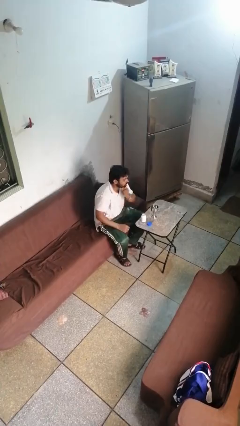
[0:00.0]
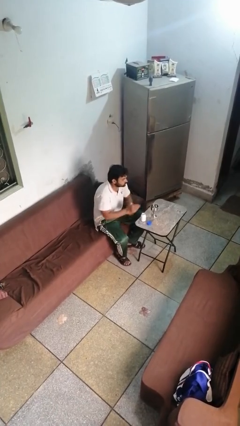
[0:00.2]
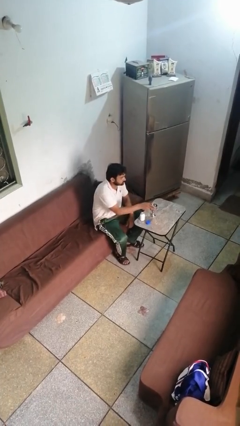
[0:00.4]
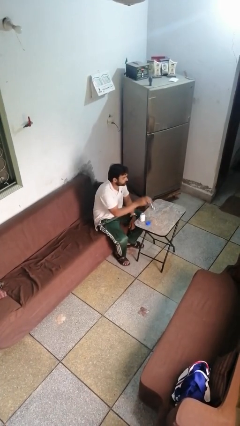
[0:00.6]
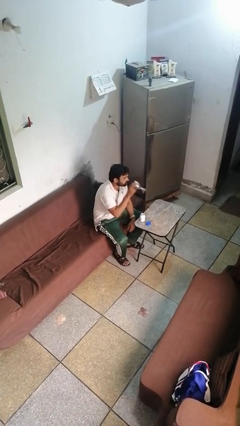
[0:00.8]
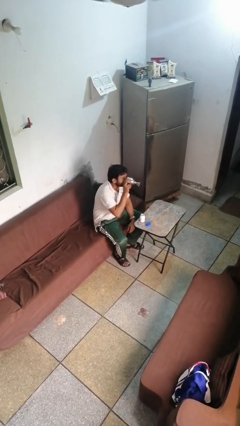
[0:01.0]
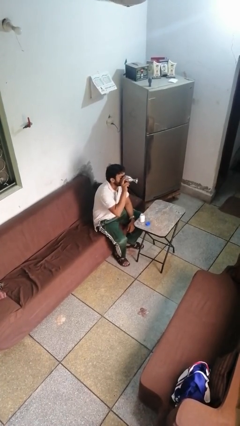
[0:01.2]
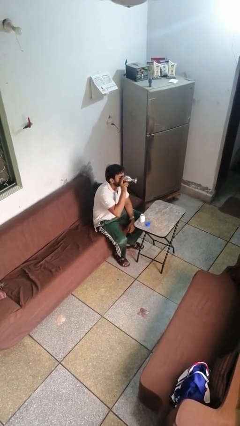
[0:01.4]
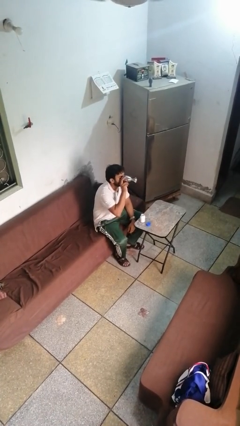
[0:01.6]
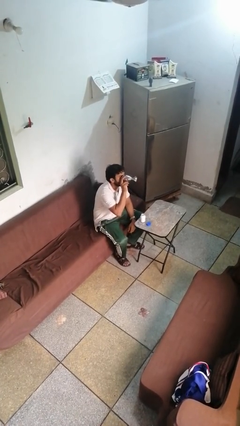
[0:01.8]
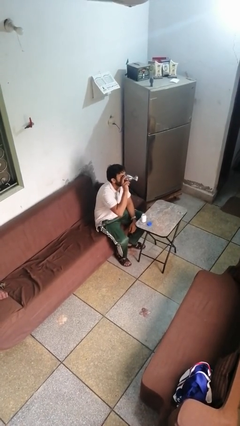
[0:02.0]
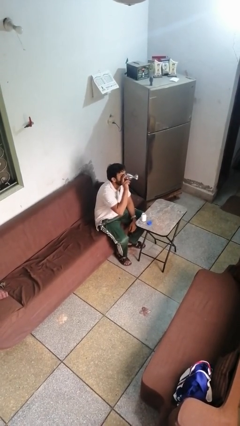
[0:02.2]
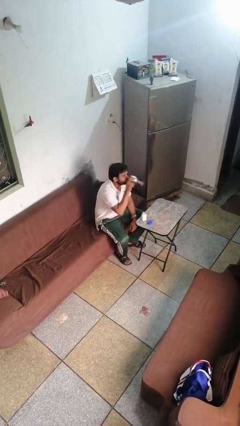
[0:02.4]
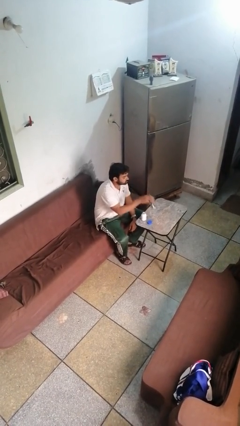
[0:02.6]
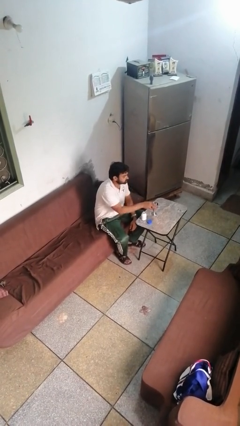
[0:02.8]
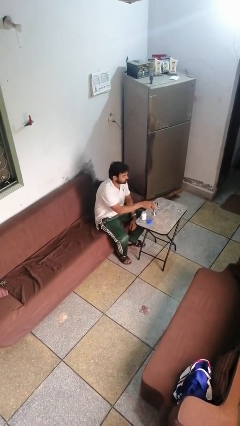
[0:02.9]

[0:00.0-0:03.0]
person drinks from cup

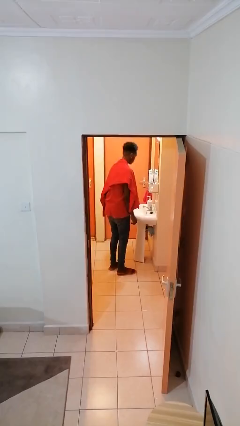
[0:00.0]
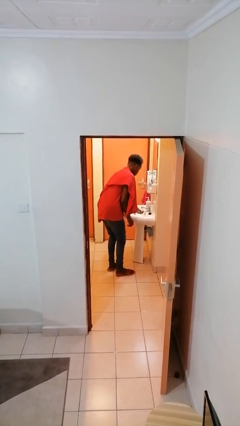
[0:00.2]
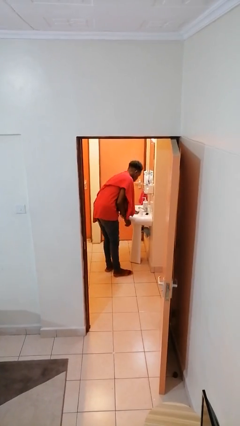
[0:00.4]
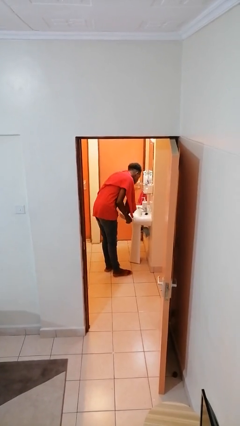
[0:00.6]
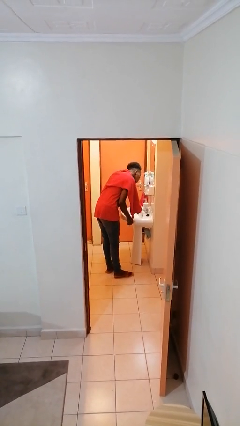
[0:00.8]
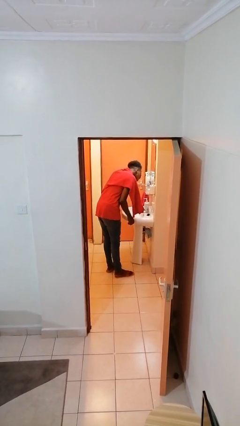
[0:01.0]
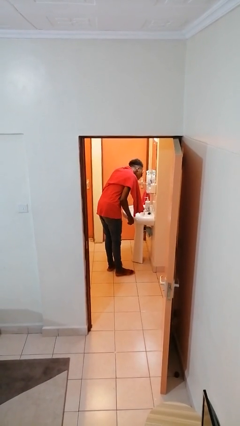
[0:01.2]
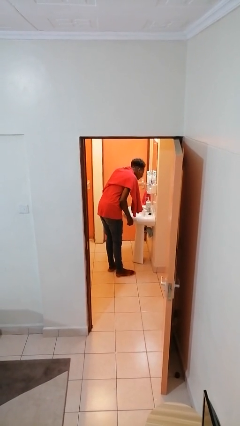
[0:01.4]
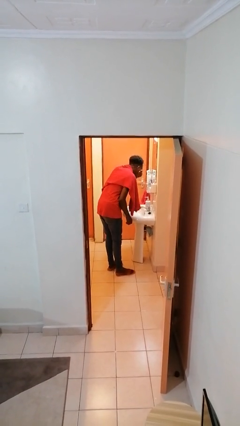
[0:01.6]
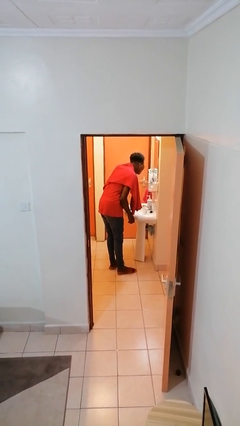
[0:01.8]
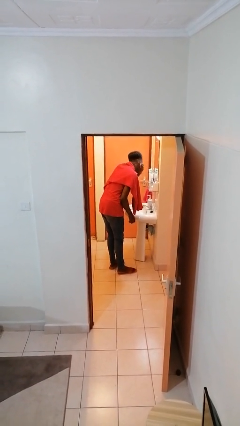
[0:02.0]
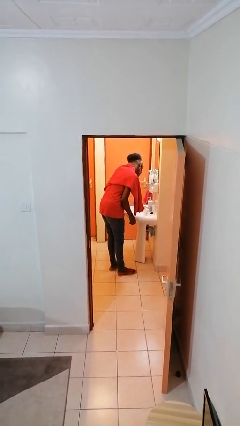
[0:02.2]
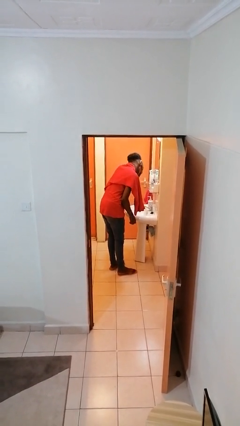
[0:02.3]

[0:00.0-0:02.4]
person washes face

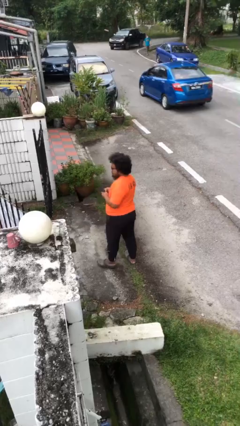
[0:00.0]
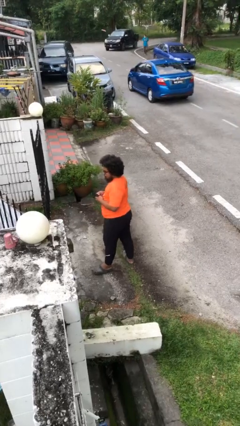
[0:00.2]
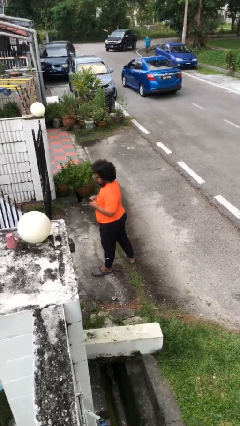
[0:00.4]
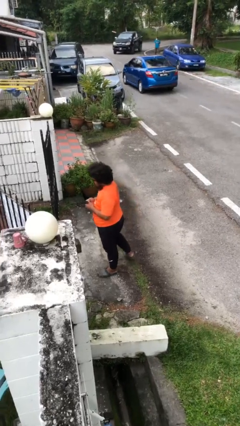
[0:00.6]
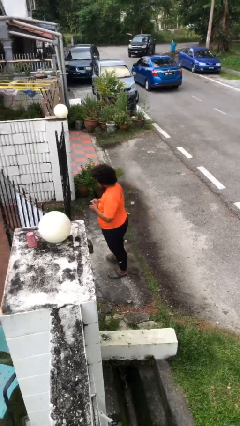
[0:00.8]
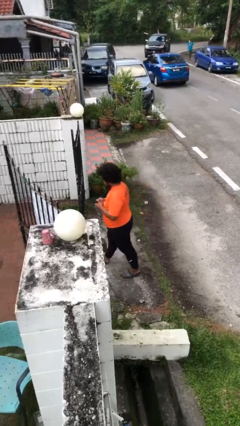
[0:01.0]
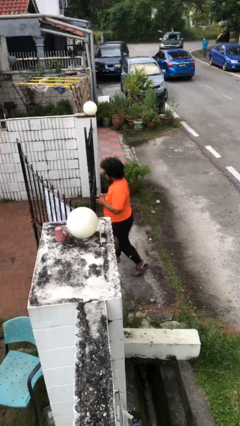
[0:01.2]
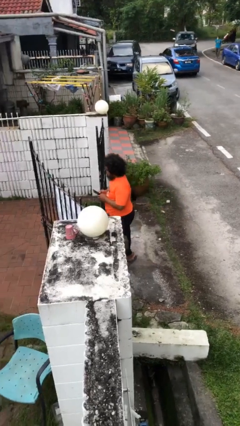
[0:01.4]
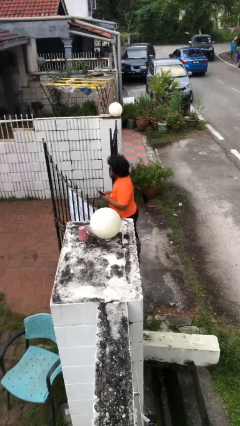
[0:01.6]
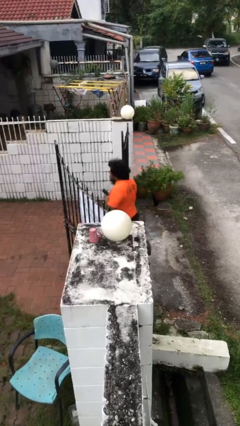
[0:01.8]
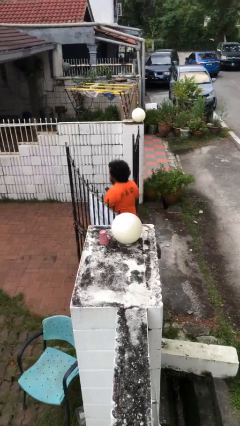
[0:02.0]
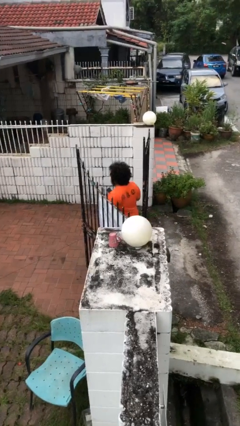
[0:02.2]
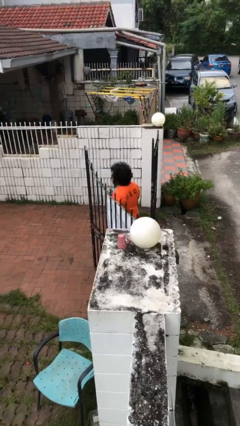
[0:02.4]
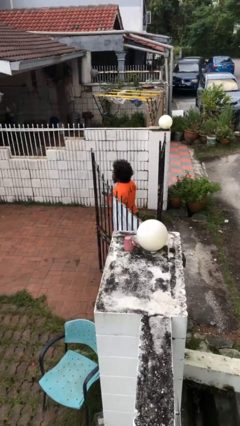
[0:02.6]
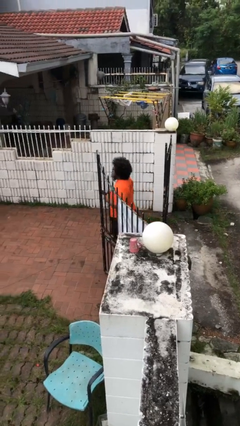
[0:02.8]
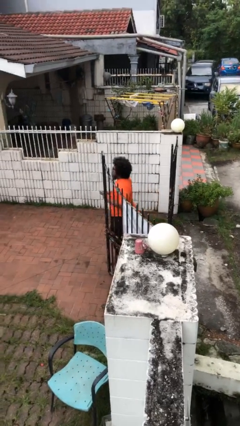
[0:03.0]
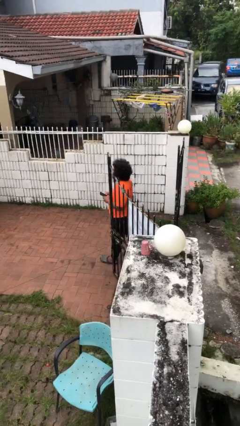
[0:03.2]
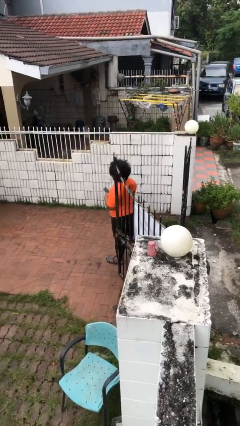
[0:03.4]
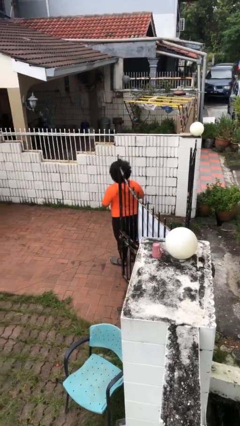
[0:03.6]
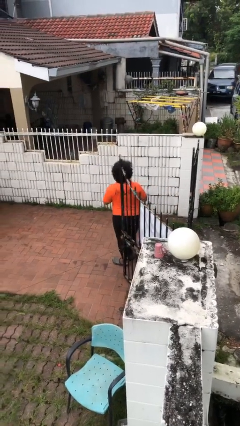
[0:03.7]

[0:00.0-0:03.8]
person enters scene through structure

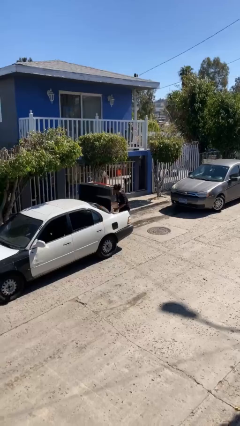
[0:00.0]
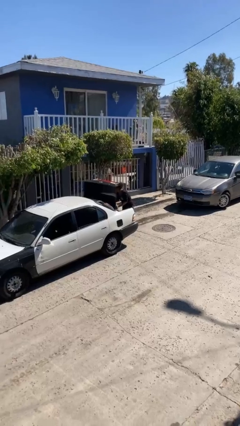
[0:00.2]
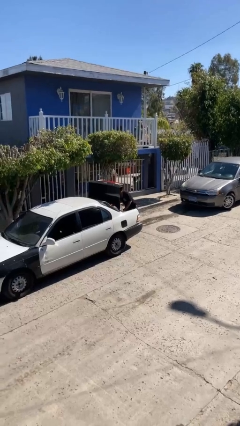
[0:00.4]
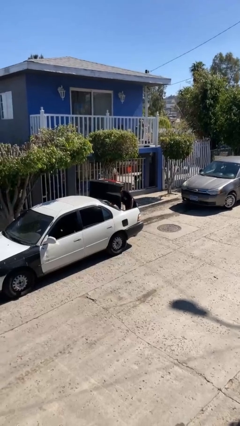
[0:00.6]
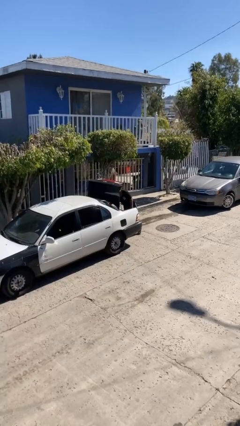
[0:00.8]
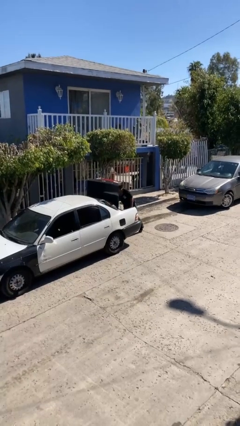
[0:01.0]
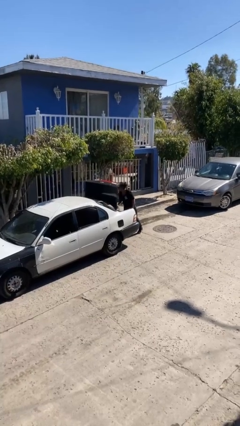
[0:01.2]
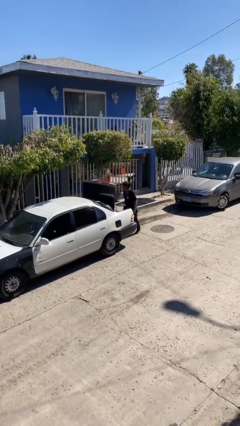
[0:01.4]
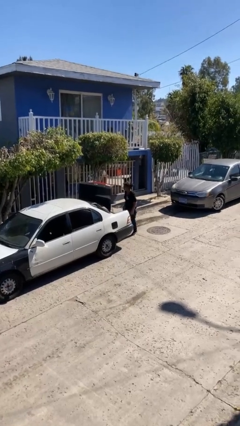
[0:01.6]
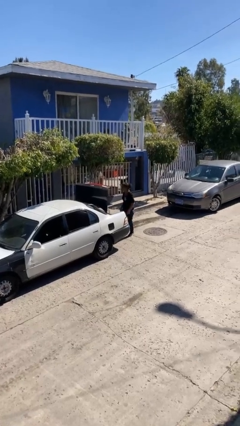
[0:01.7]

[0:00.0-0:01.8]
person loads car

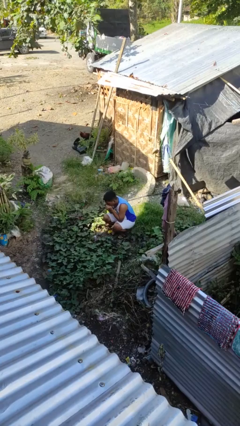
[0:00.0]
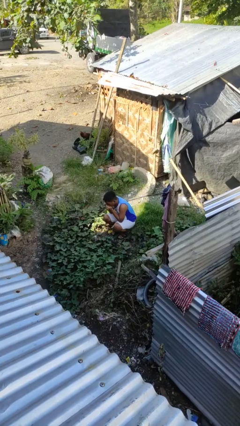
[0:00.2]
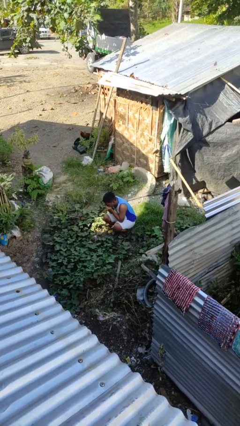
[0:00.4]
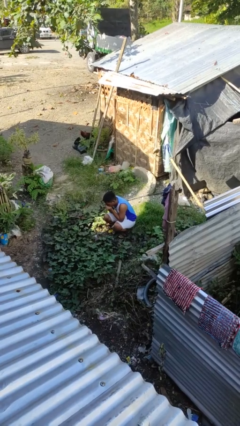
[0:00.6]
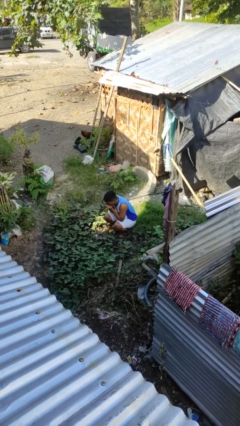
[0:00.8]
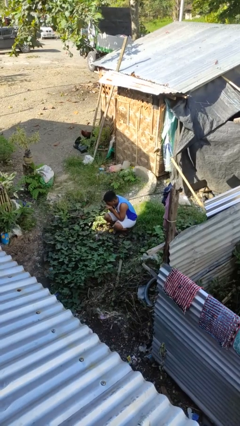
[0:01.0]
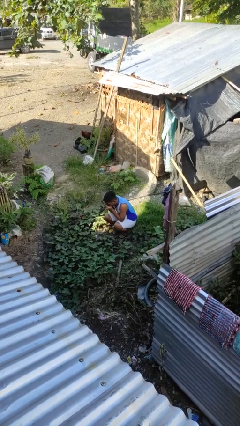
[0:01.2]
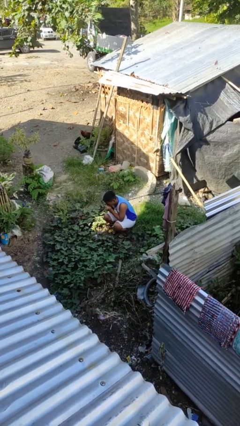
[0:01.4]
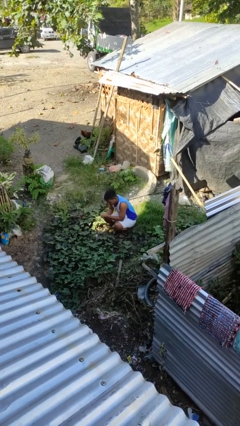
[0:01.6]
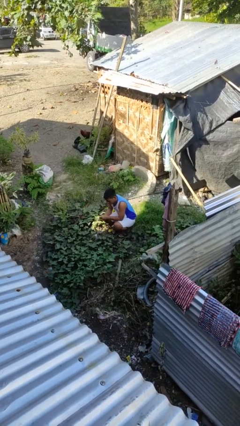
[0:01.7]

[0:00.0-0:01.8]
person blows into hands

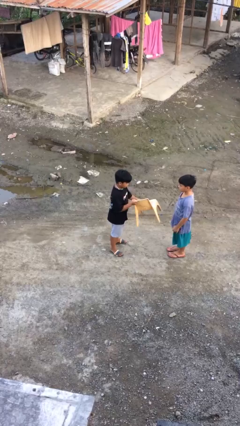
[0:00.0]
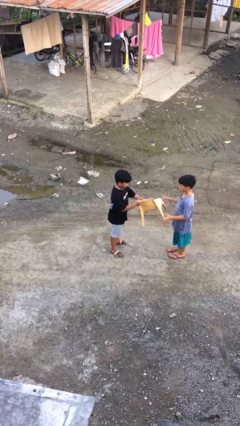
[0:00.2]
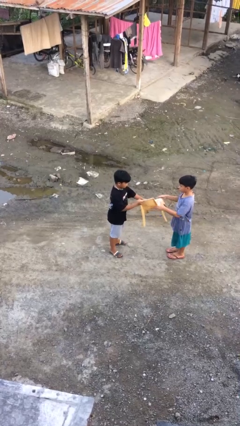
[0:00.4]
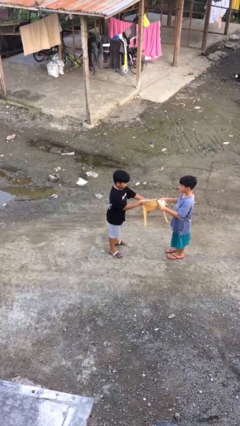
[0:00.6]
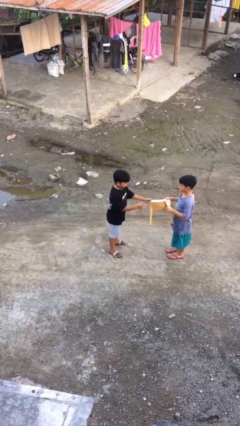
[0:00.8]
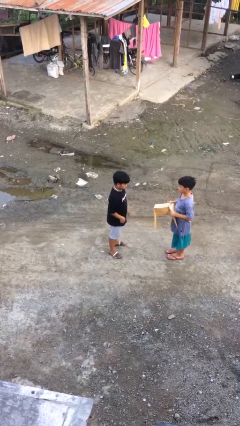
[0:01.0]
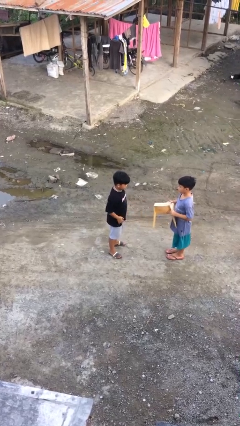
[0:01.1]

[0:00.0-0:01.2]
person transfers object to person

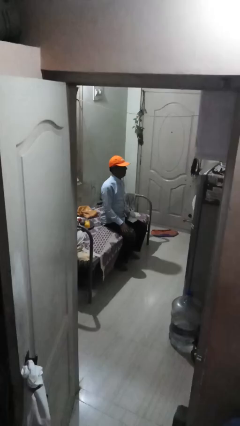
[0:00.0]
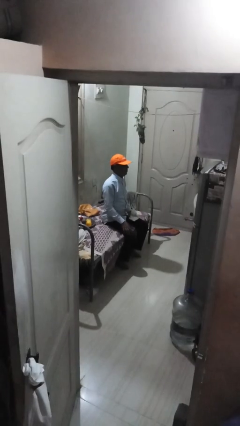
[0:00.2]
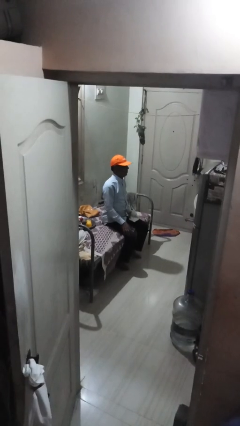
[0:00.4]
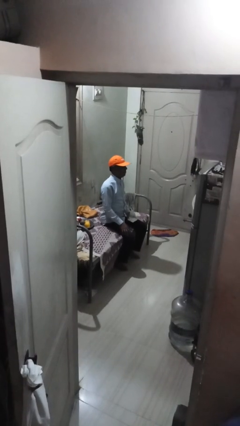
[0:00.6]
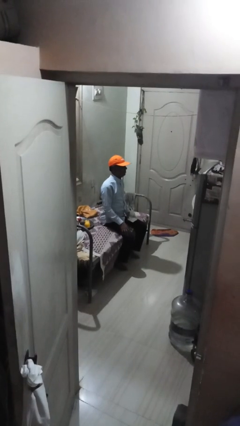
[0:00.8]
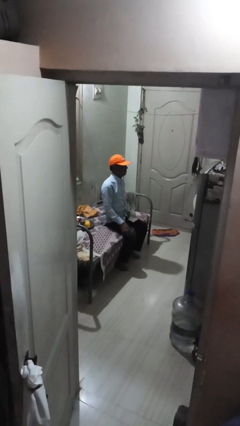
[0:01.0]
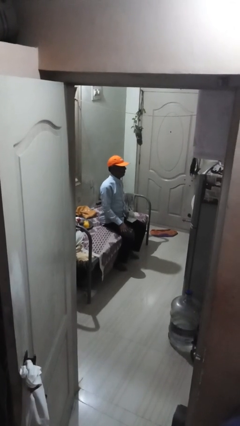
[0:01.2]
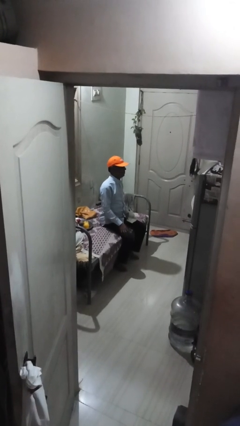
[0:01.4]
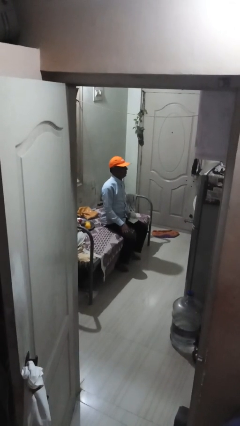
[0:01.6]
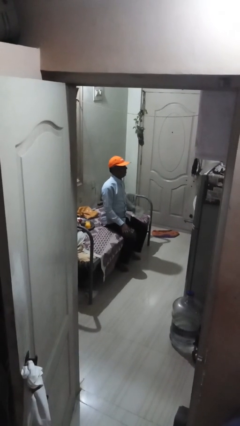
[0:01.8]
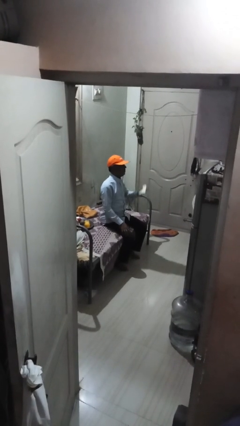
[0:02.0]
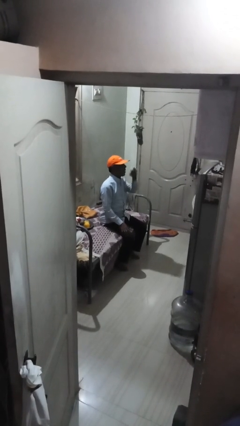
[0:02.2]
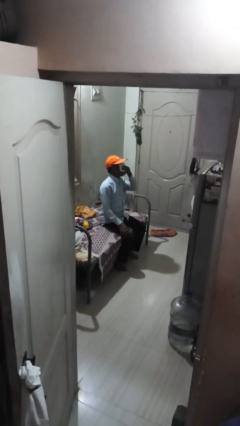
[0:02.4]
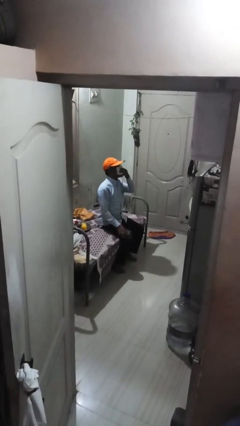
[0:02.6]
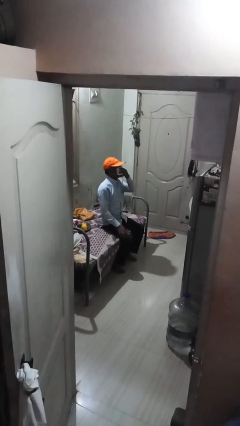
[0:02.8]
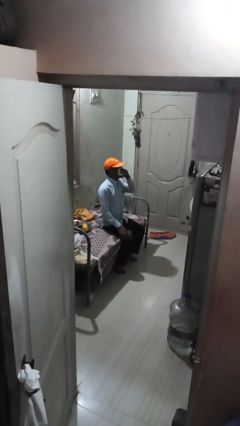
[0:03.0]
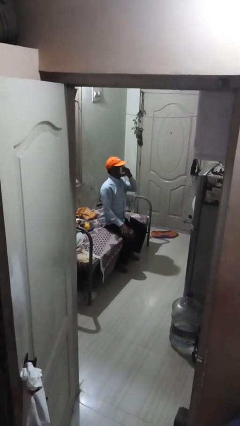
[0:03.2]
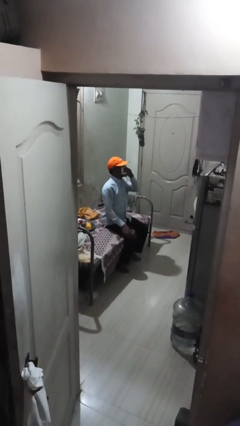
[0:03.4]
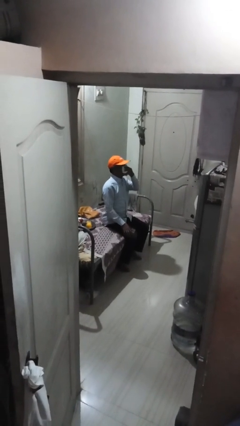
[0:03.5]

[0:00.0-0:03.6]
person blows nose
